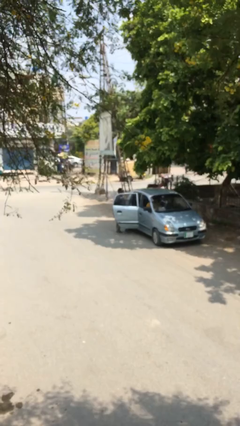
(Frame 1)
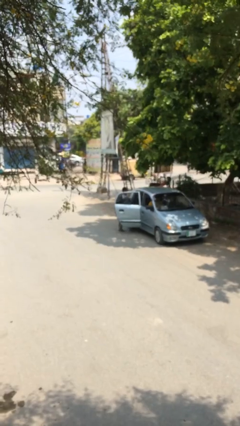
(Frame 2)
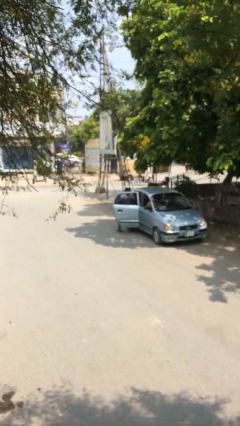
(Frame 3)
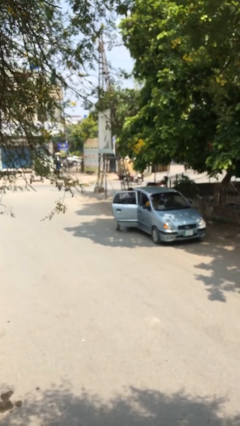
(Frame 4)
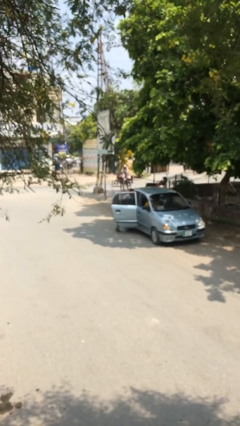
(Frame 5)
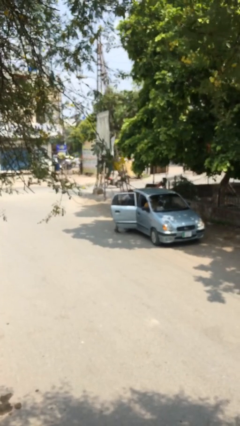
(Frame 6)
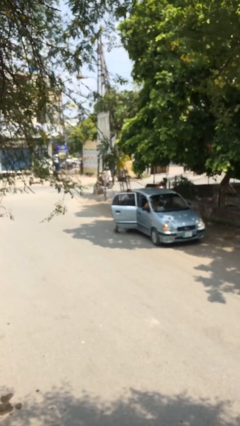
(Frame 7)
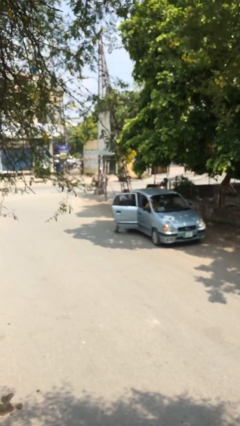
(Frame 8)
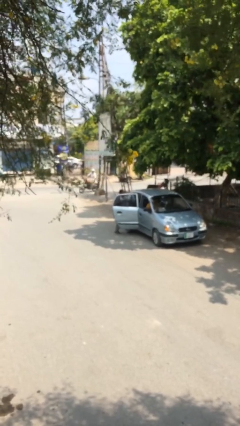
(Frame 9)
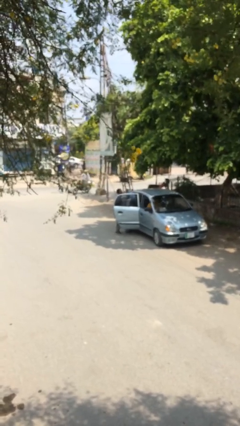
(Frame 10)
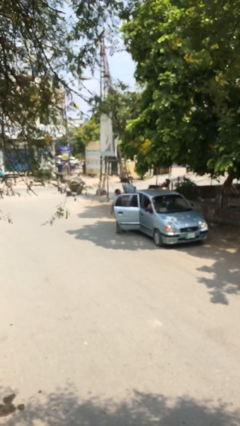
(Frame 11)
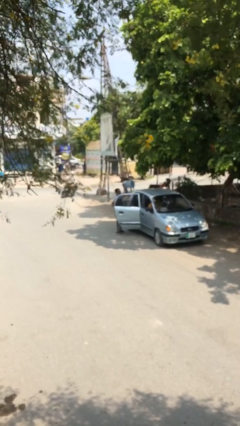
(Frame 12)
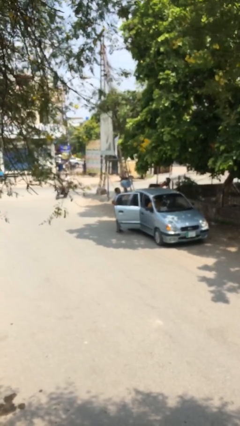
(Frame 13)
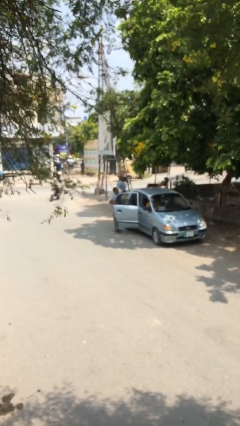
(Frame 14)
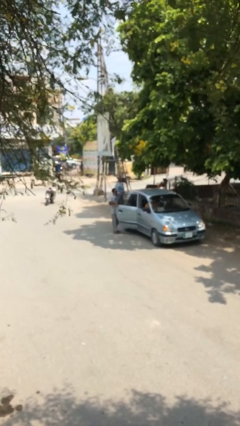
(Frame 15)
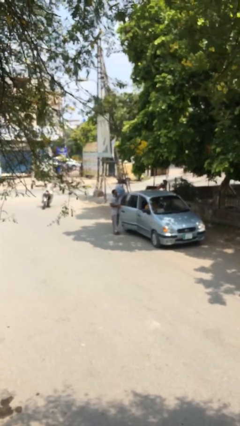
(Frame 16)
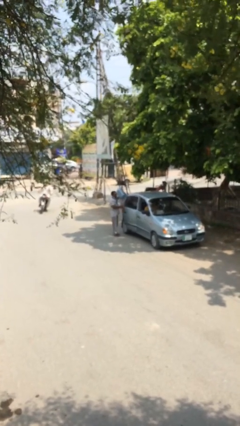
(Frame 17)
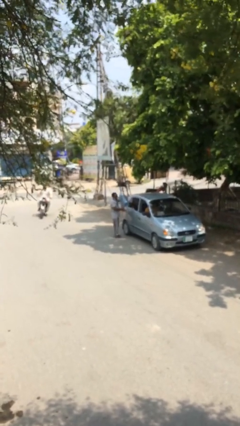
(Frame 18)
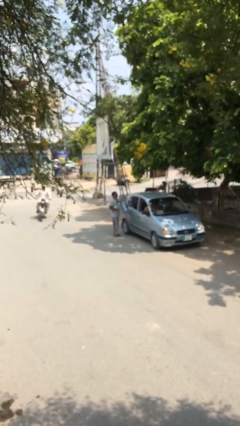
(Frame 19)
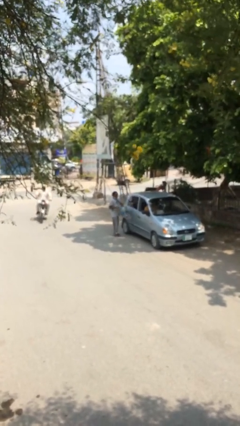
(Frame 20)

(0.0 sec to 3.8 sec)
person unloads car

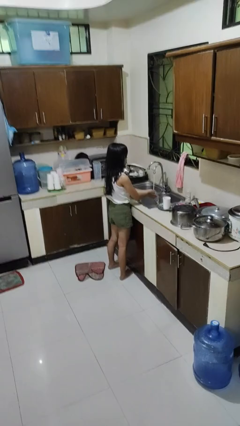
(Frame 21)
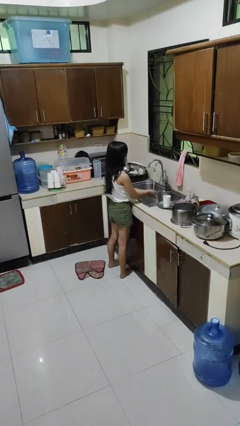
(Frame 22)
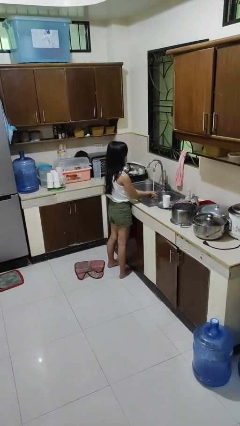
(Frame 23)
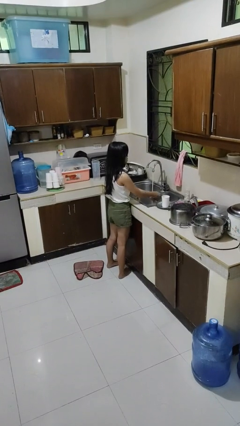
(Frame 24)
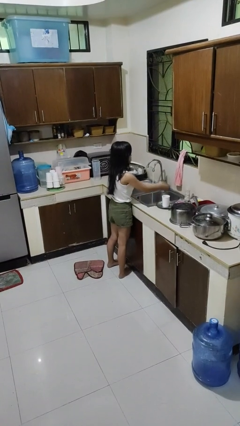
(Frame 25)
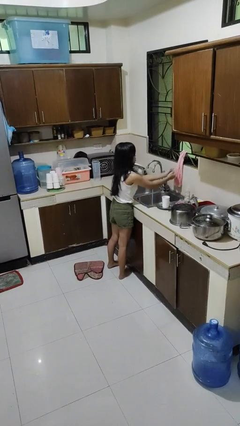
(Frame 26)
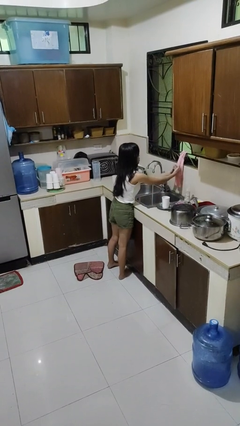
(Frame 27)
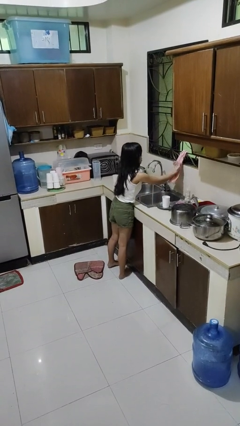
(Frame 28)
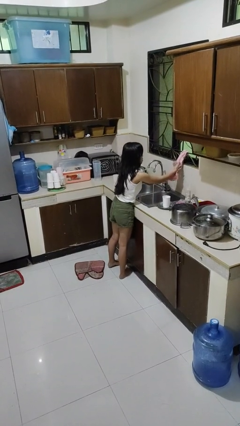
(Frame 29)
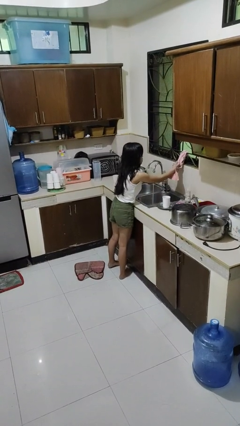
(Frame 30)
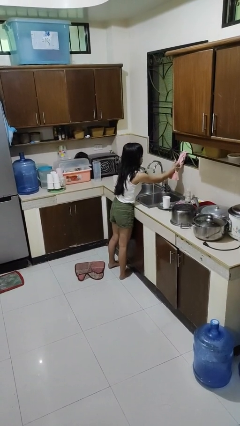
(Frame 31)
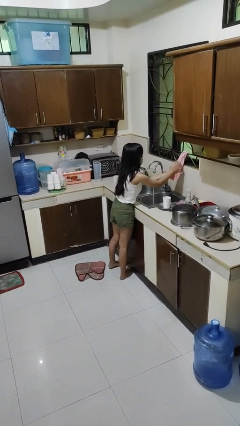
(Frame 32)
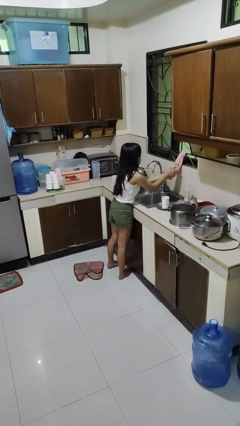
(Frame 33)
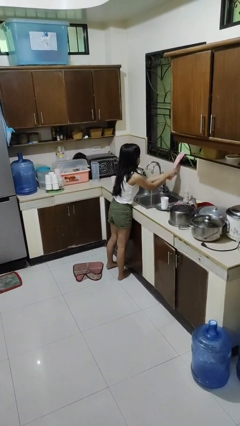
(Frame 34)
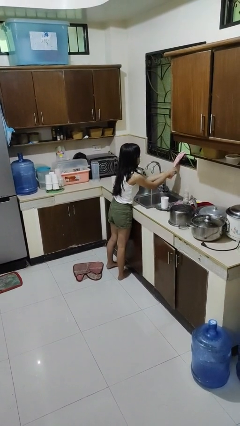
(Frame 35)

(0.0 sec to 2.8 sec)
person dries hands with towel

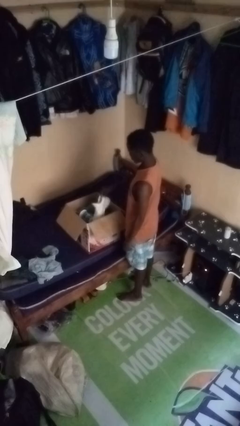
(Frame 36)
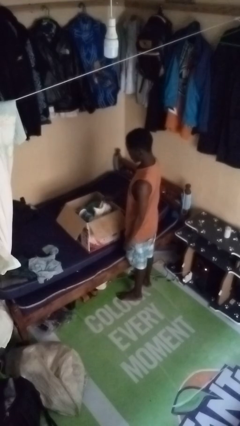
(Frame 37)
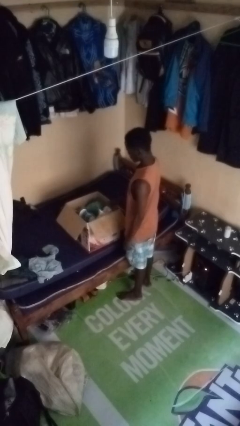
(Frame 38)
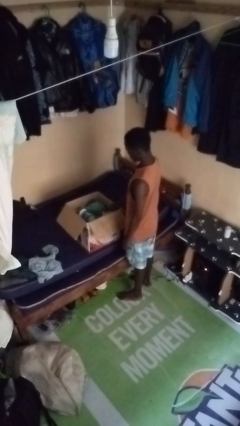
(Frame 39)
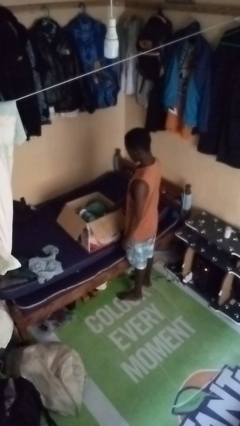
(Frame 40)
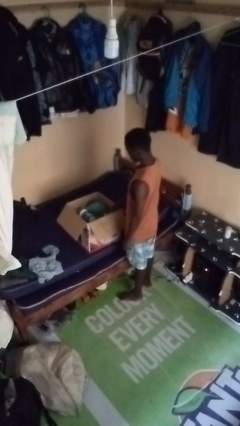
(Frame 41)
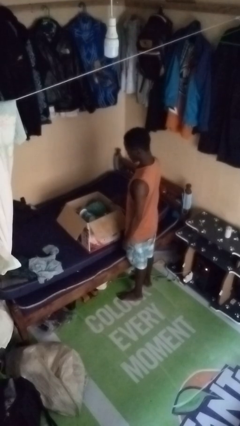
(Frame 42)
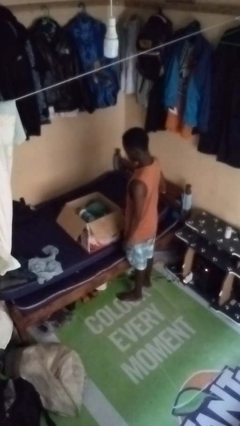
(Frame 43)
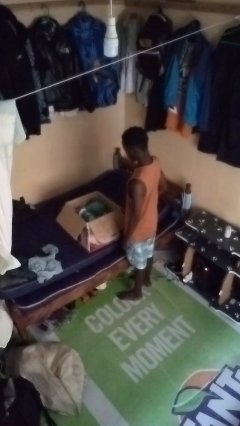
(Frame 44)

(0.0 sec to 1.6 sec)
person puts object into box

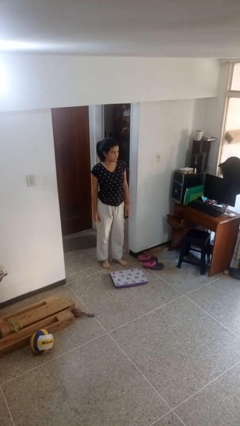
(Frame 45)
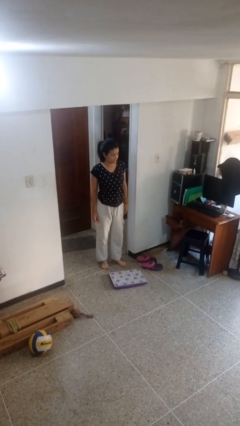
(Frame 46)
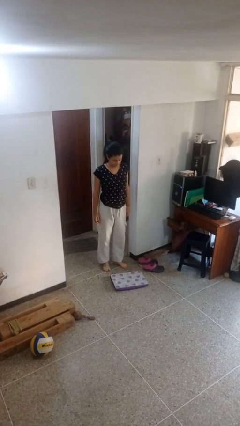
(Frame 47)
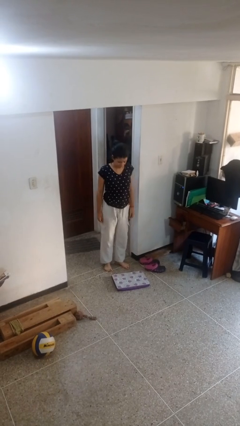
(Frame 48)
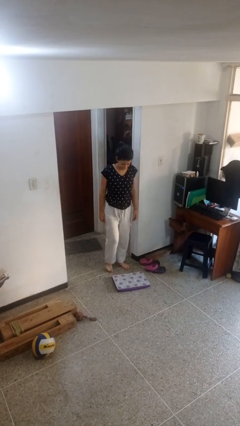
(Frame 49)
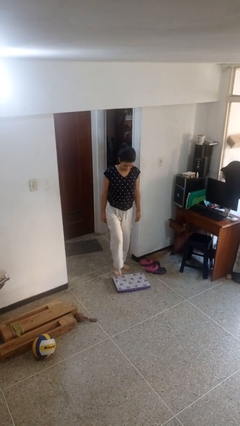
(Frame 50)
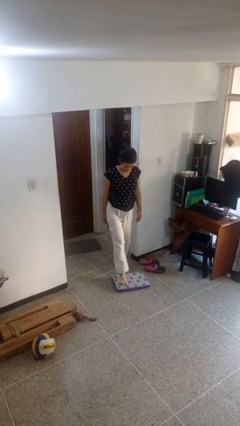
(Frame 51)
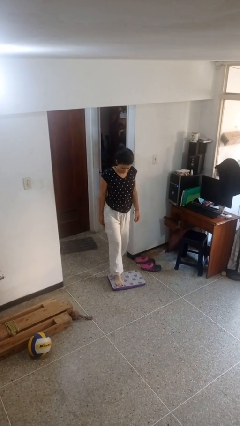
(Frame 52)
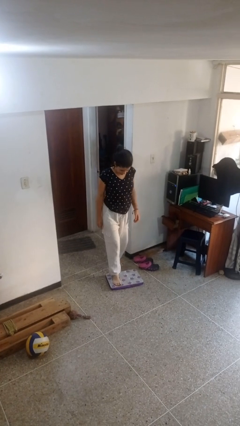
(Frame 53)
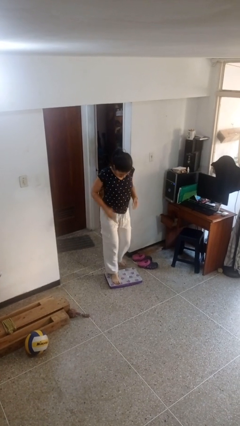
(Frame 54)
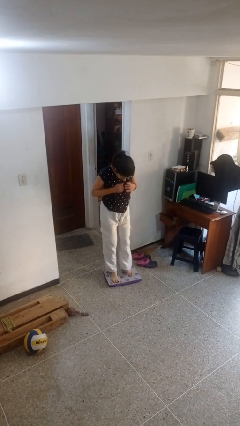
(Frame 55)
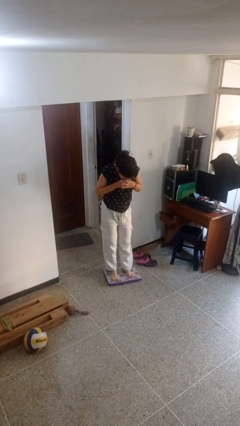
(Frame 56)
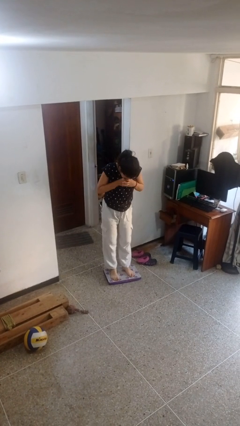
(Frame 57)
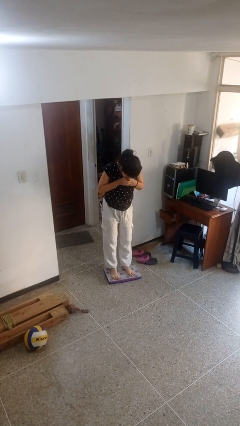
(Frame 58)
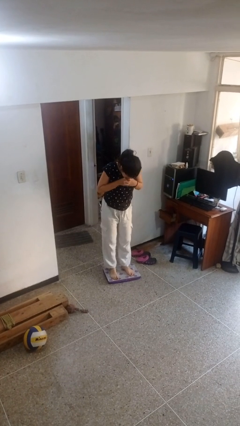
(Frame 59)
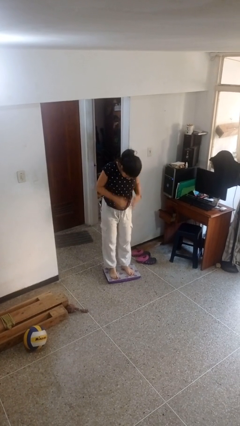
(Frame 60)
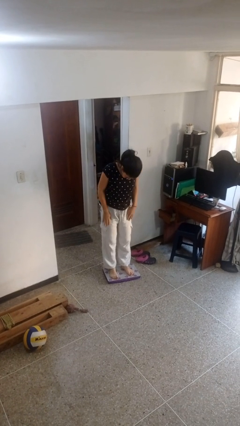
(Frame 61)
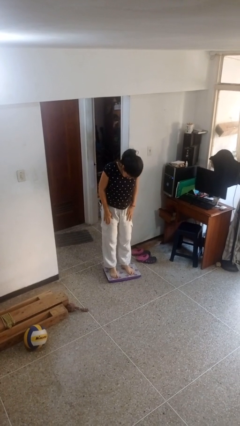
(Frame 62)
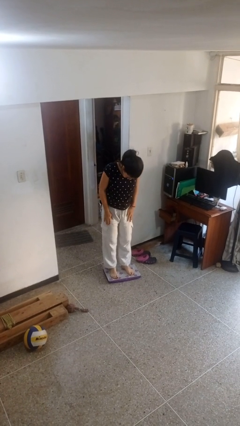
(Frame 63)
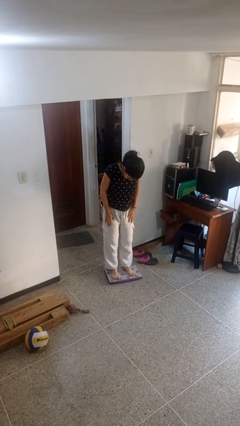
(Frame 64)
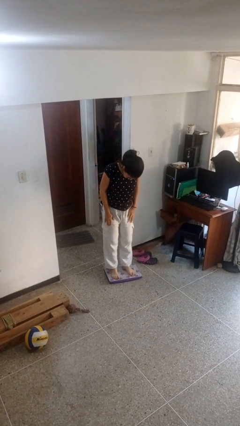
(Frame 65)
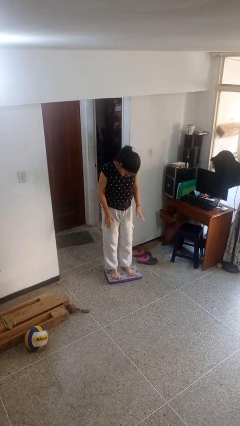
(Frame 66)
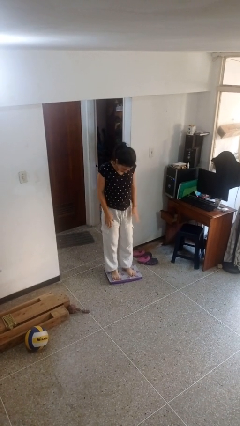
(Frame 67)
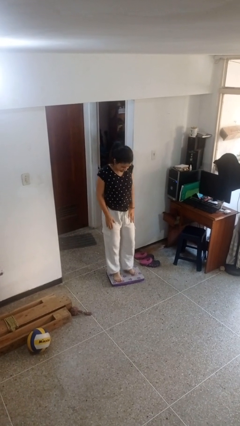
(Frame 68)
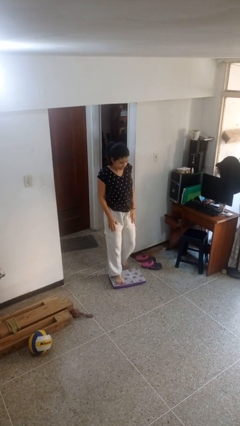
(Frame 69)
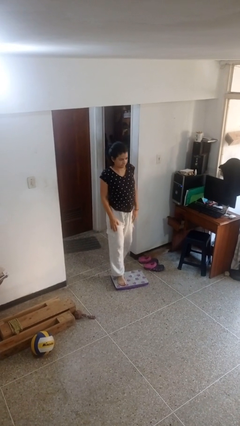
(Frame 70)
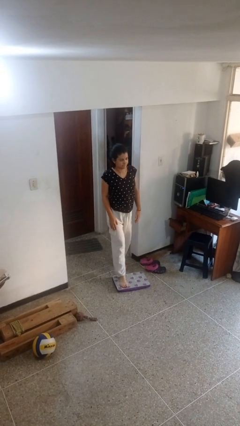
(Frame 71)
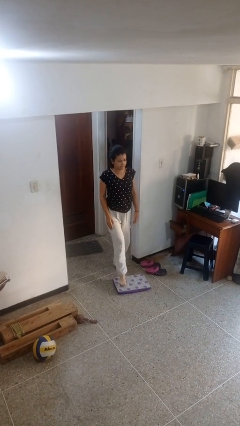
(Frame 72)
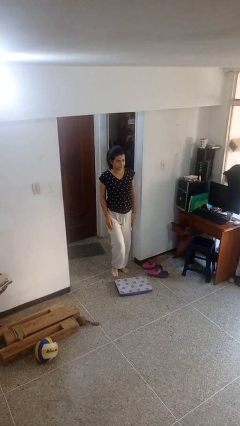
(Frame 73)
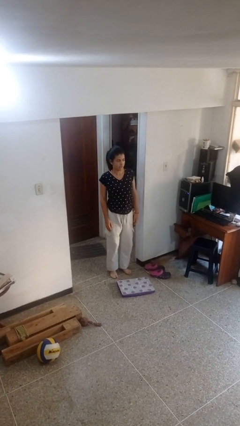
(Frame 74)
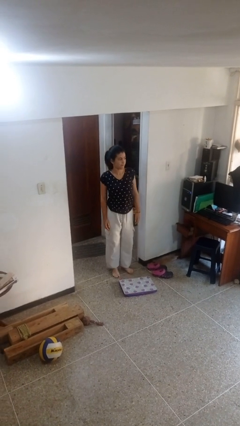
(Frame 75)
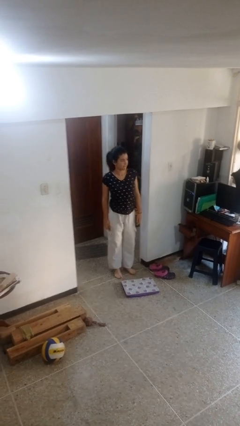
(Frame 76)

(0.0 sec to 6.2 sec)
person uses bodyweight scale

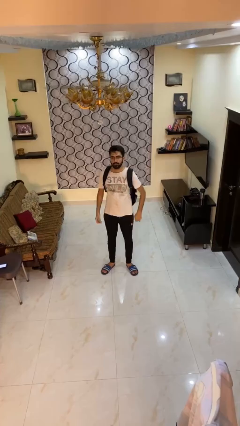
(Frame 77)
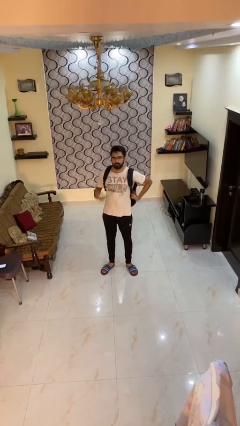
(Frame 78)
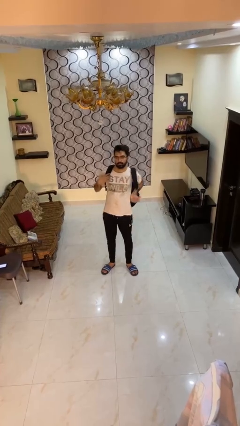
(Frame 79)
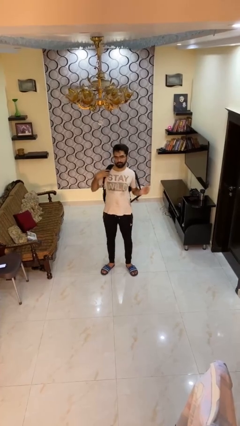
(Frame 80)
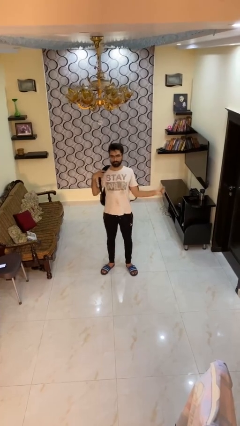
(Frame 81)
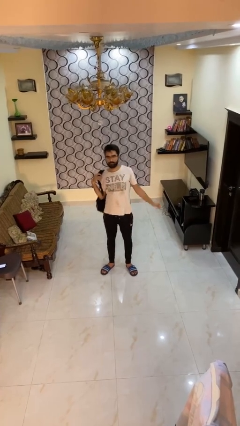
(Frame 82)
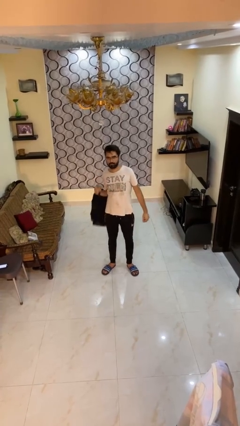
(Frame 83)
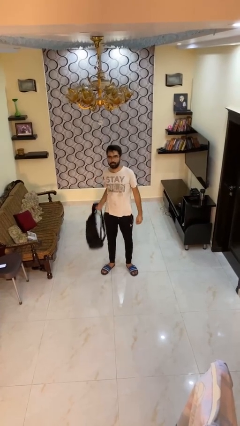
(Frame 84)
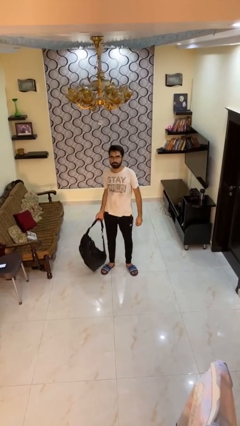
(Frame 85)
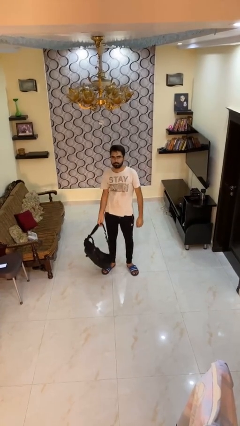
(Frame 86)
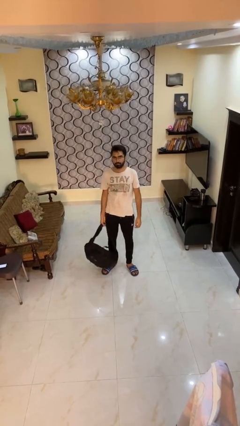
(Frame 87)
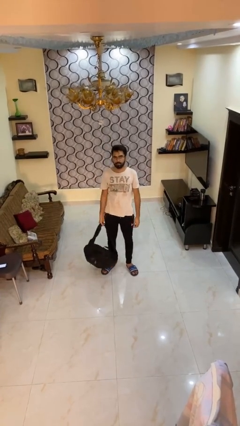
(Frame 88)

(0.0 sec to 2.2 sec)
person takes off backpack

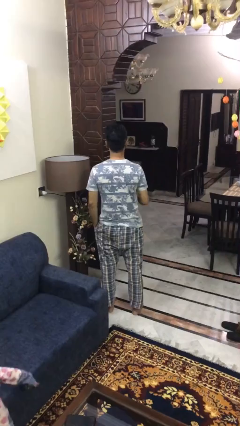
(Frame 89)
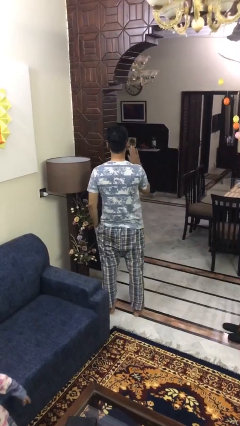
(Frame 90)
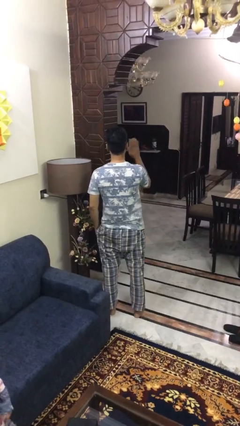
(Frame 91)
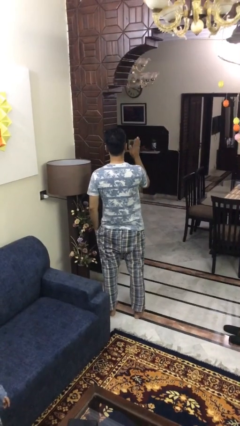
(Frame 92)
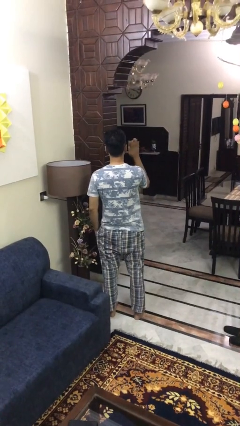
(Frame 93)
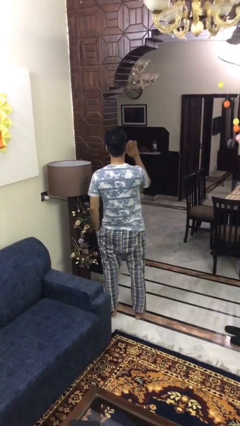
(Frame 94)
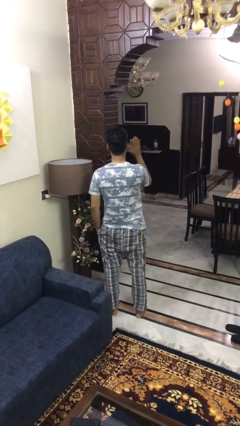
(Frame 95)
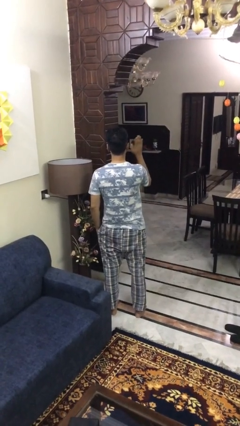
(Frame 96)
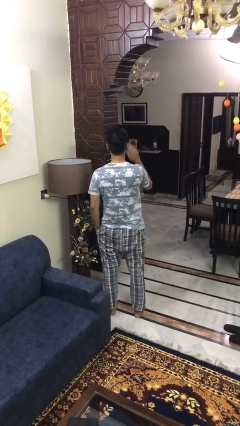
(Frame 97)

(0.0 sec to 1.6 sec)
person waves at person
